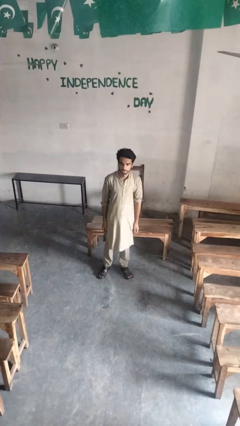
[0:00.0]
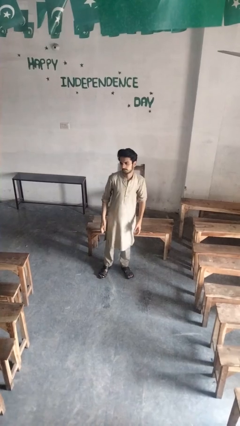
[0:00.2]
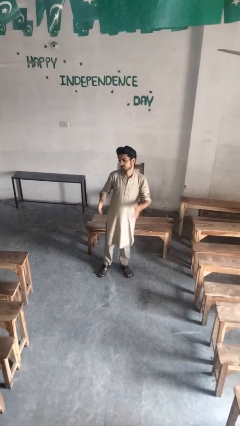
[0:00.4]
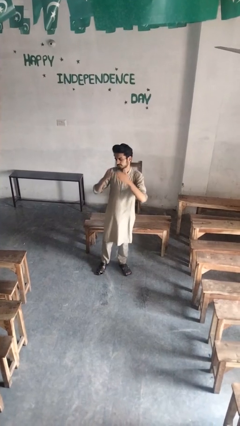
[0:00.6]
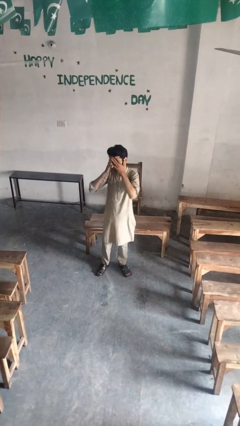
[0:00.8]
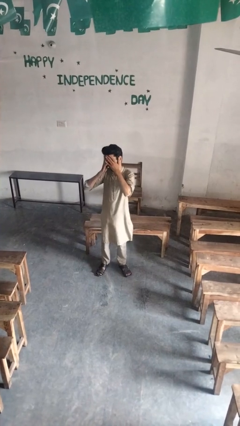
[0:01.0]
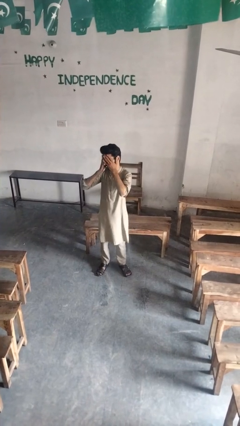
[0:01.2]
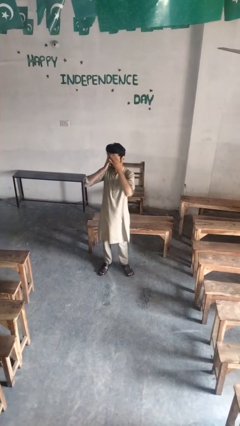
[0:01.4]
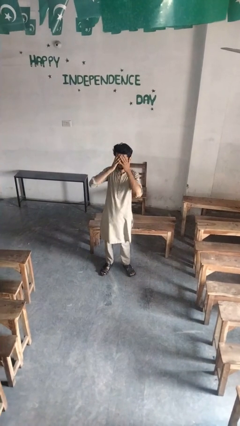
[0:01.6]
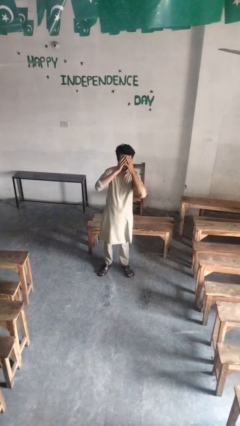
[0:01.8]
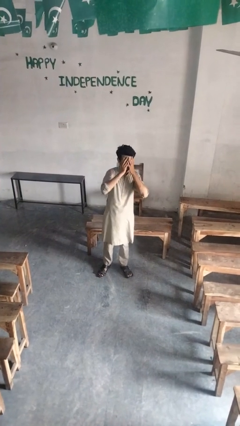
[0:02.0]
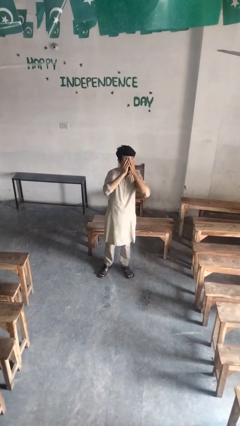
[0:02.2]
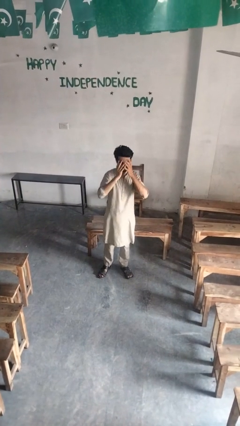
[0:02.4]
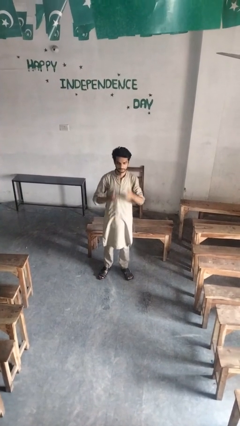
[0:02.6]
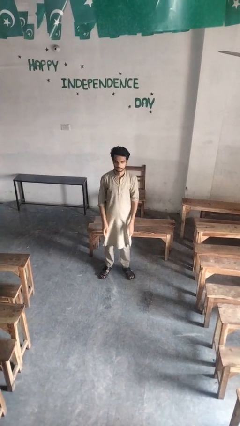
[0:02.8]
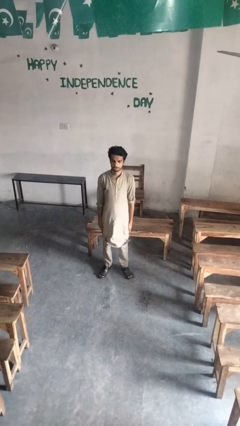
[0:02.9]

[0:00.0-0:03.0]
person covers face with hands

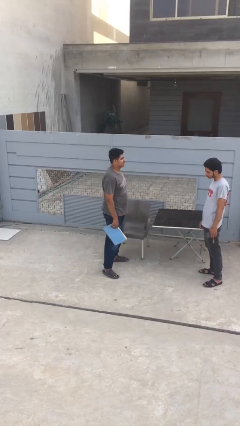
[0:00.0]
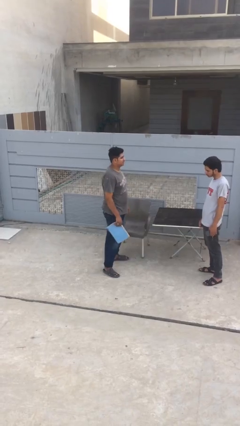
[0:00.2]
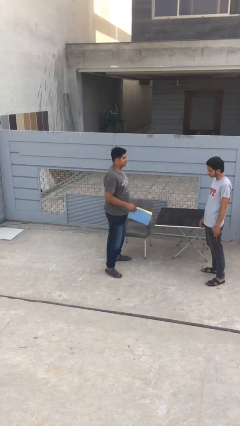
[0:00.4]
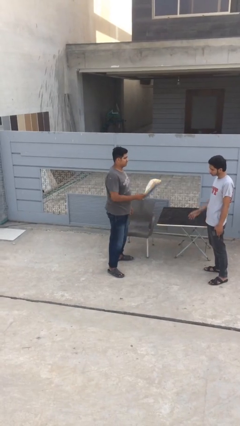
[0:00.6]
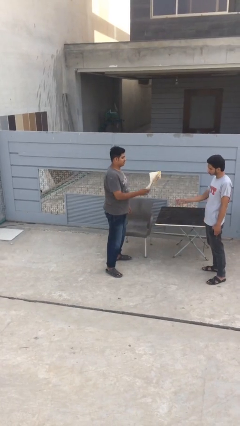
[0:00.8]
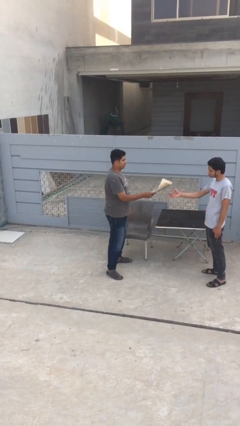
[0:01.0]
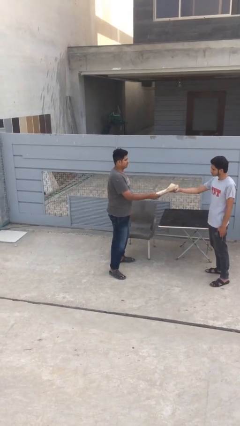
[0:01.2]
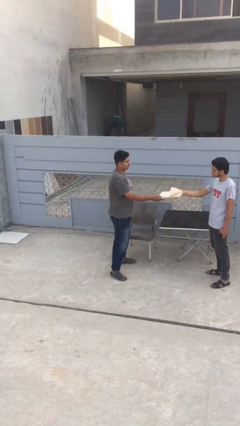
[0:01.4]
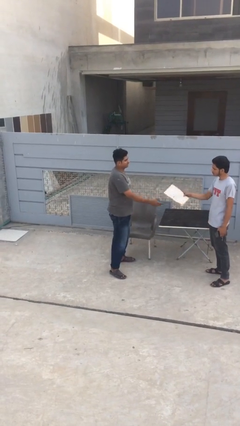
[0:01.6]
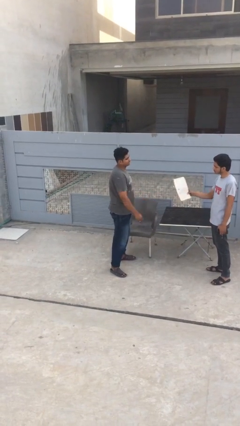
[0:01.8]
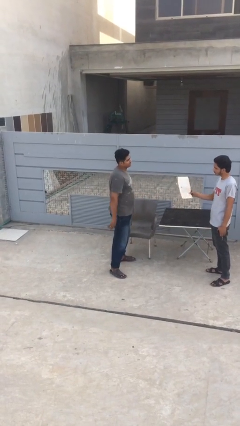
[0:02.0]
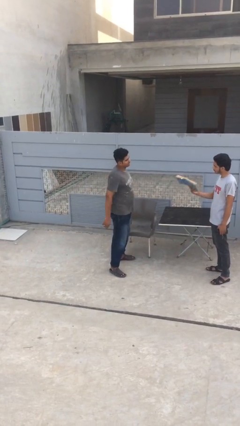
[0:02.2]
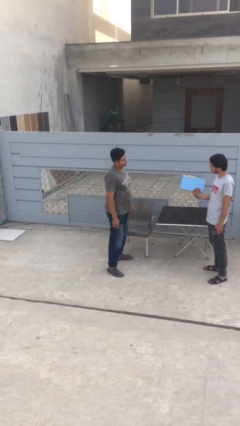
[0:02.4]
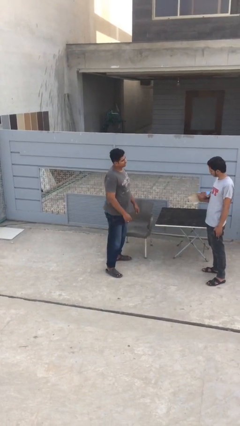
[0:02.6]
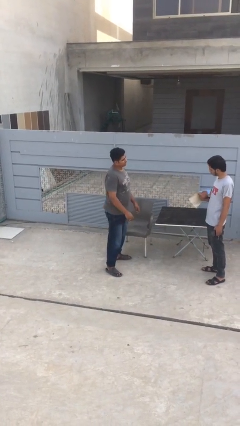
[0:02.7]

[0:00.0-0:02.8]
person transfers object to person

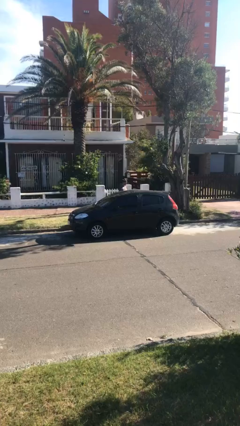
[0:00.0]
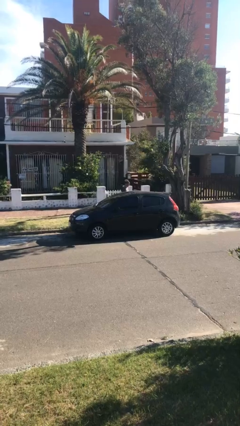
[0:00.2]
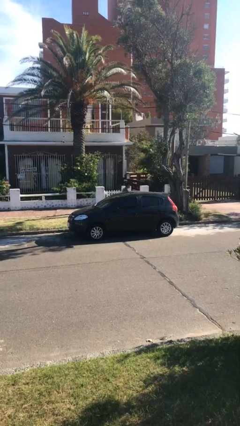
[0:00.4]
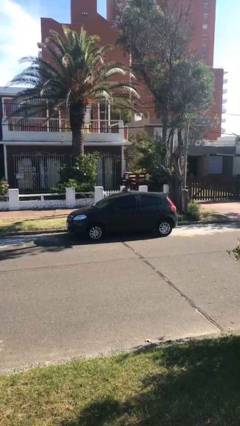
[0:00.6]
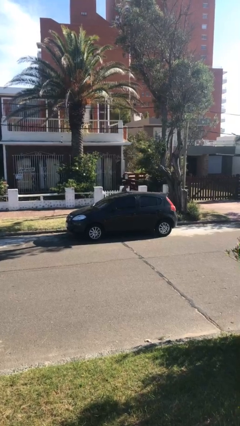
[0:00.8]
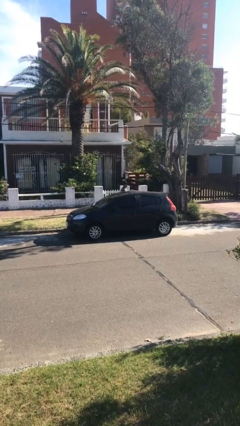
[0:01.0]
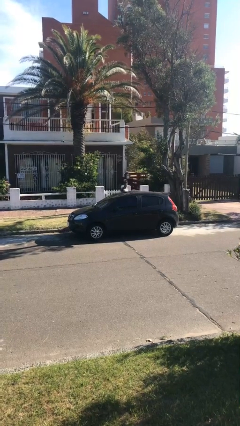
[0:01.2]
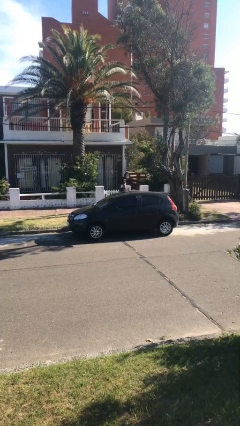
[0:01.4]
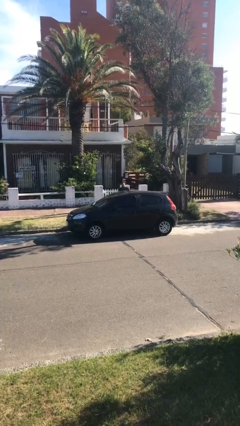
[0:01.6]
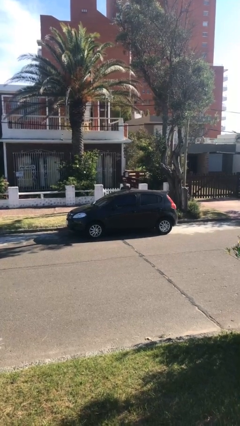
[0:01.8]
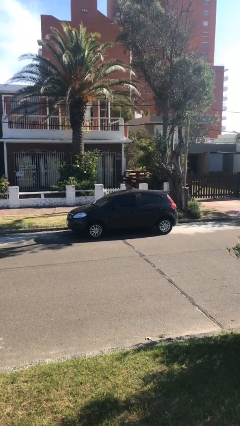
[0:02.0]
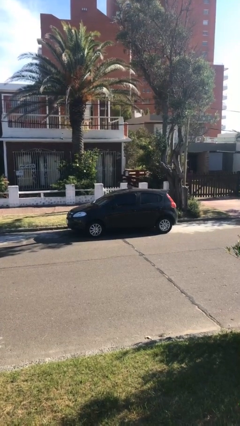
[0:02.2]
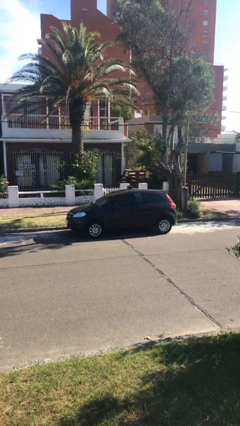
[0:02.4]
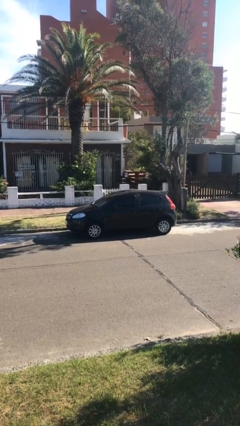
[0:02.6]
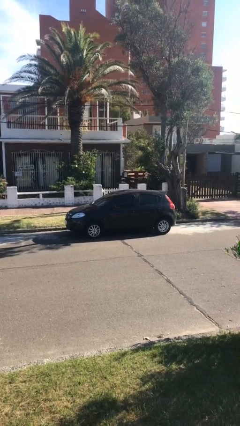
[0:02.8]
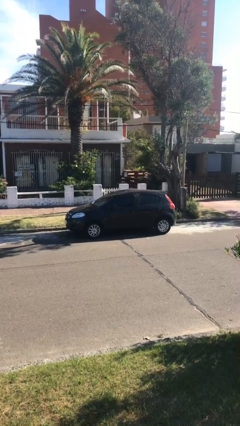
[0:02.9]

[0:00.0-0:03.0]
car picks up person

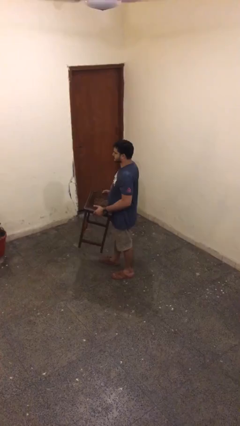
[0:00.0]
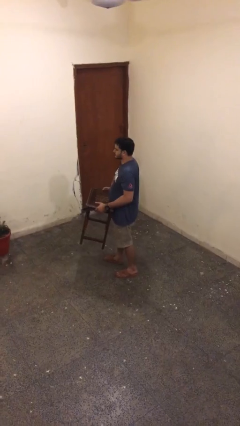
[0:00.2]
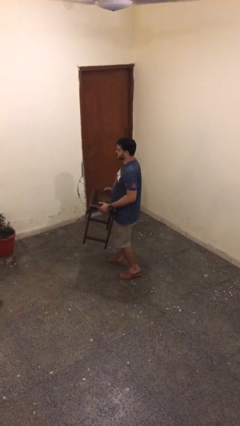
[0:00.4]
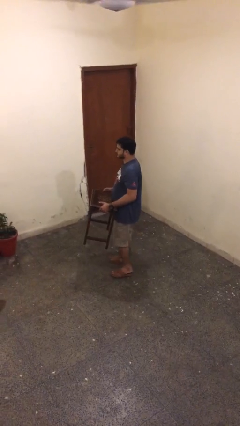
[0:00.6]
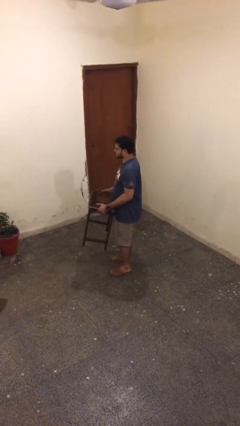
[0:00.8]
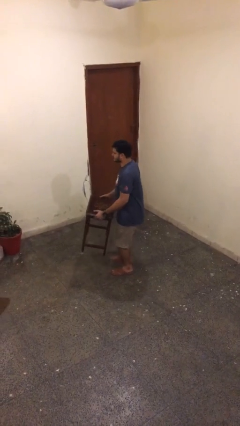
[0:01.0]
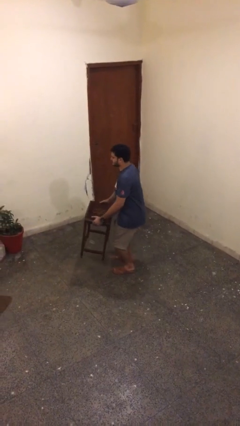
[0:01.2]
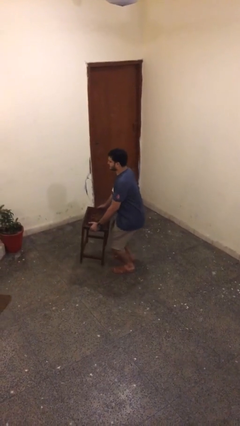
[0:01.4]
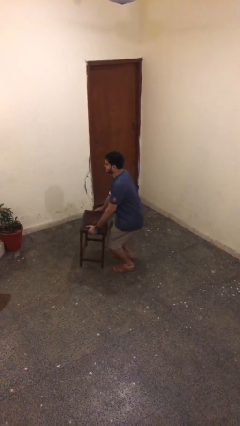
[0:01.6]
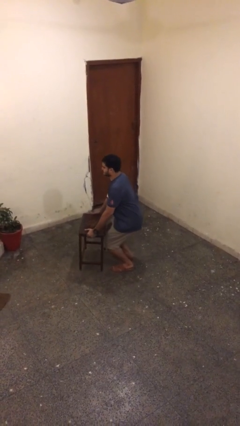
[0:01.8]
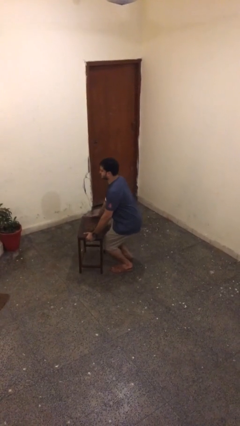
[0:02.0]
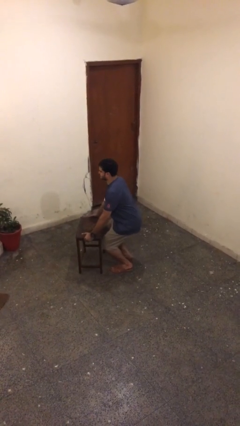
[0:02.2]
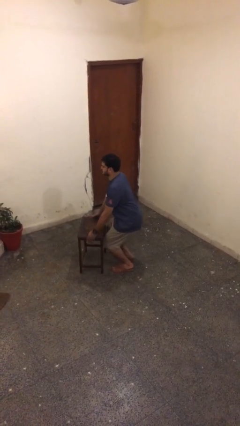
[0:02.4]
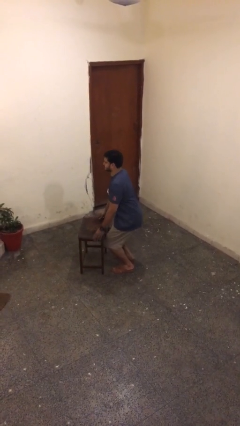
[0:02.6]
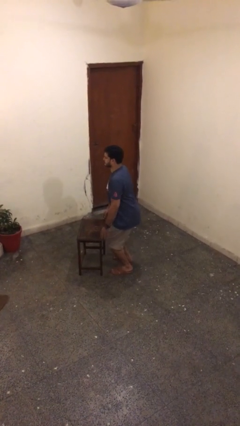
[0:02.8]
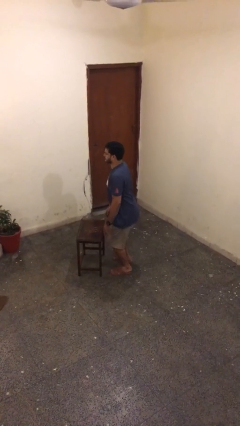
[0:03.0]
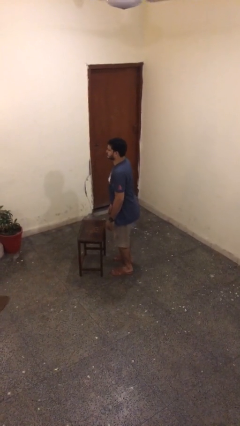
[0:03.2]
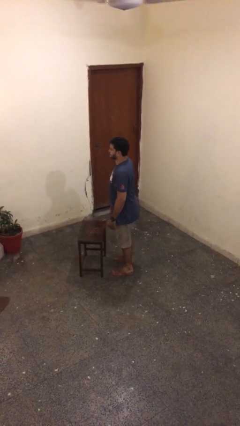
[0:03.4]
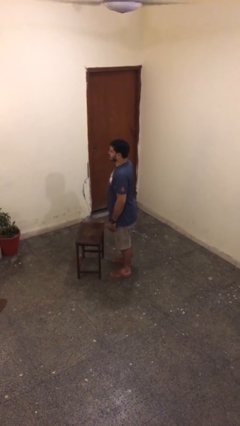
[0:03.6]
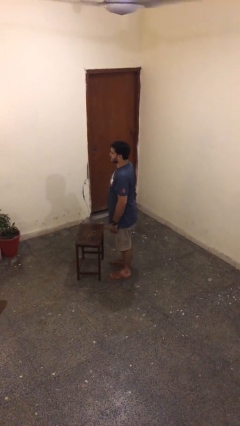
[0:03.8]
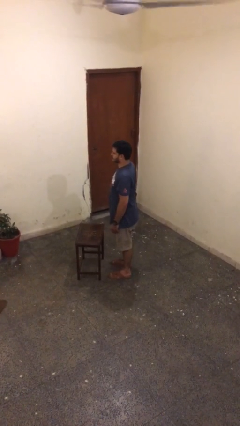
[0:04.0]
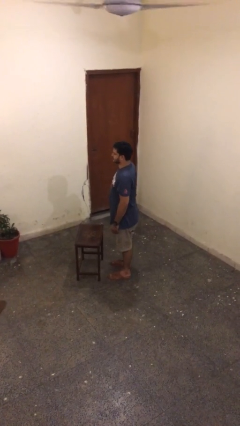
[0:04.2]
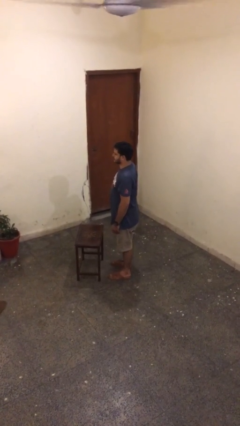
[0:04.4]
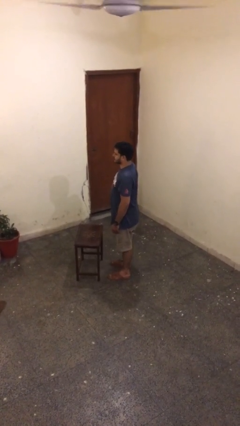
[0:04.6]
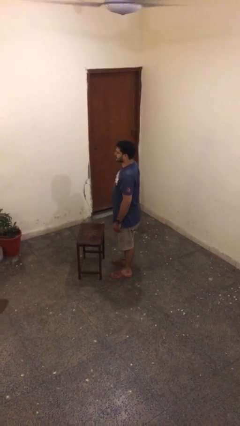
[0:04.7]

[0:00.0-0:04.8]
person puts down object on floor

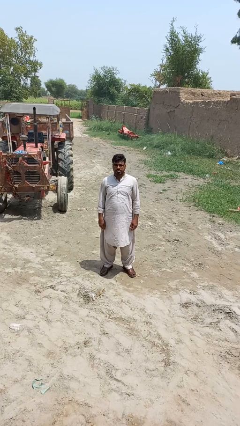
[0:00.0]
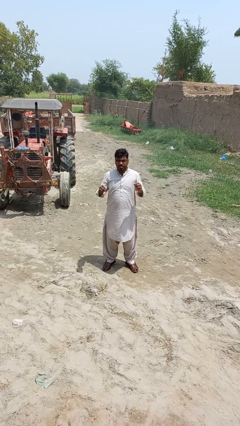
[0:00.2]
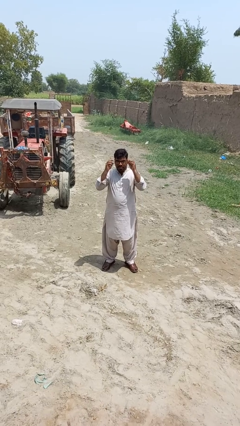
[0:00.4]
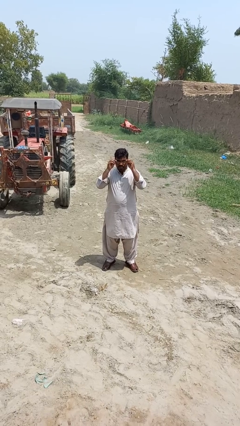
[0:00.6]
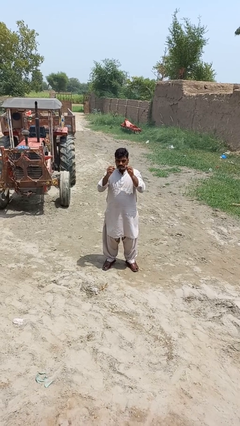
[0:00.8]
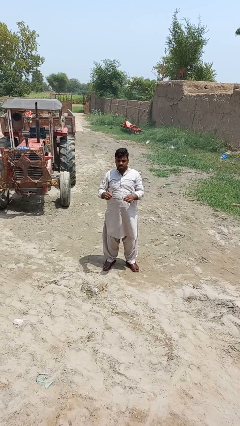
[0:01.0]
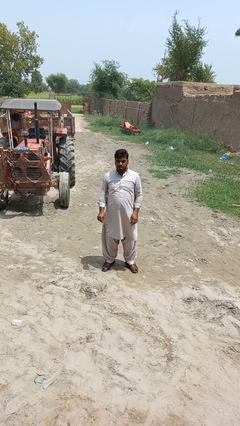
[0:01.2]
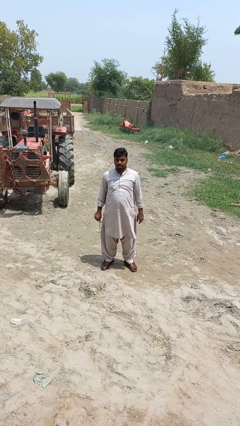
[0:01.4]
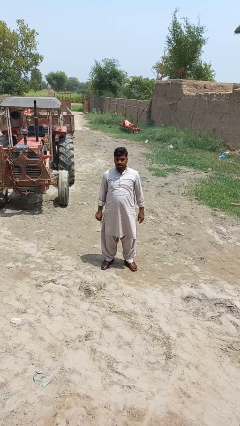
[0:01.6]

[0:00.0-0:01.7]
person takes off glasses

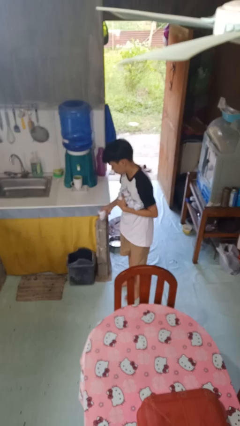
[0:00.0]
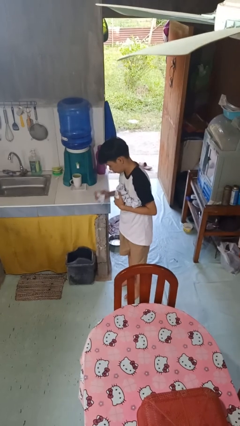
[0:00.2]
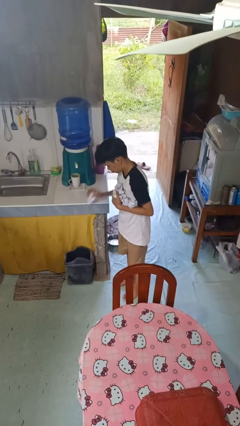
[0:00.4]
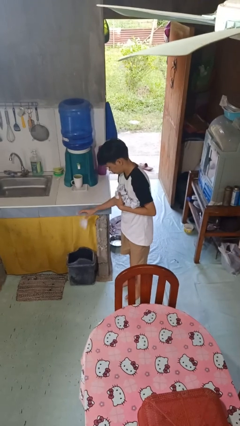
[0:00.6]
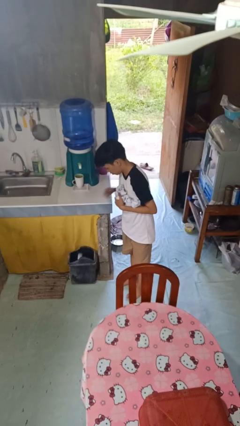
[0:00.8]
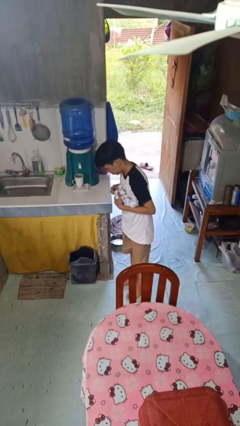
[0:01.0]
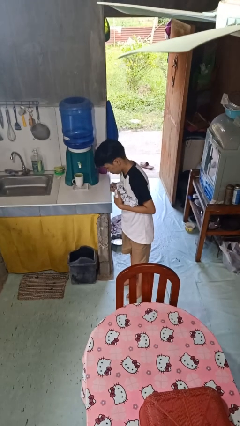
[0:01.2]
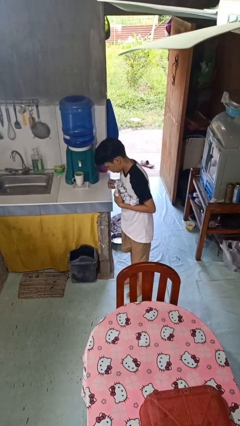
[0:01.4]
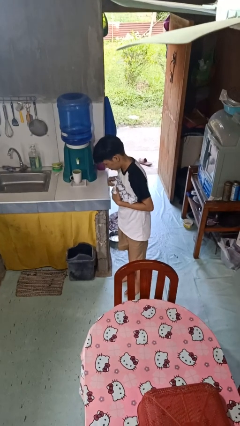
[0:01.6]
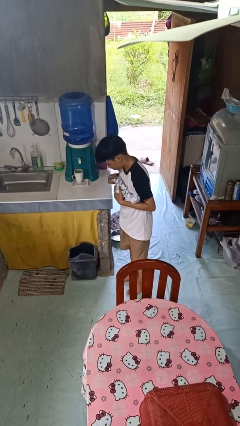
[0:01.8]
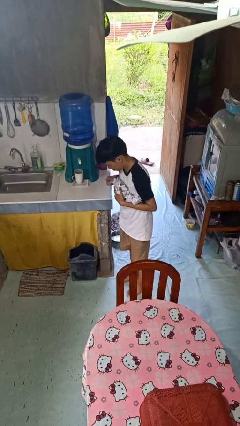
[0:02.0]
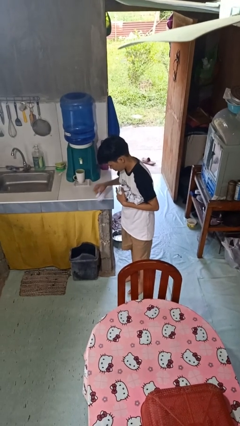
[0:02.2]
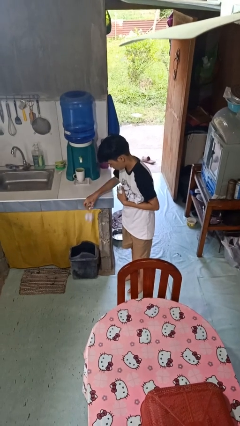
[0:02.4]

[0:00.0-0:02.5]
person discards trash
